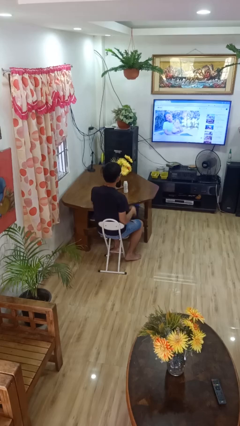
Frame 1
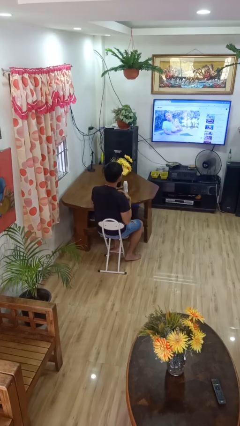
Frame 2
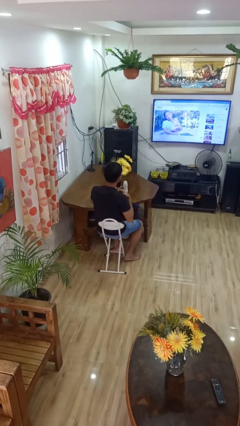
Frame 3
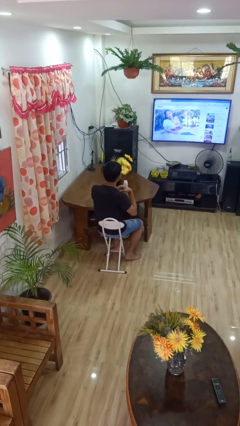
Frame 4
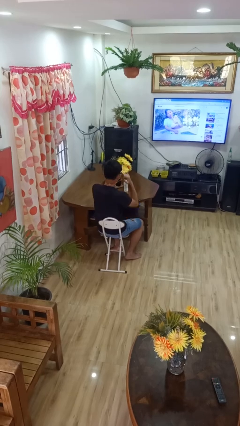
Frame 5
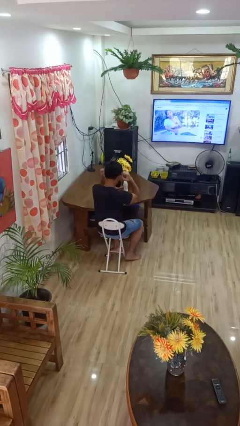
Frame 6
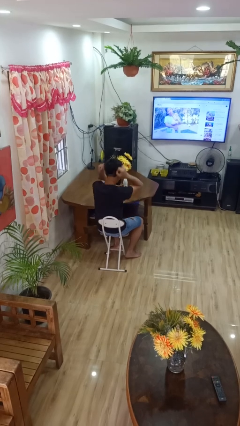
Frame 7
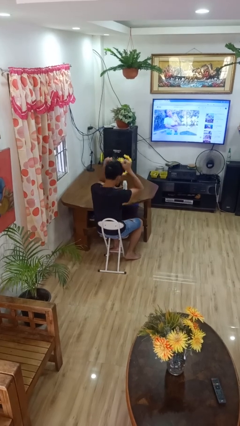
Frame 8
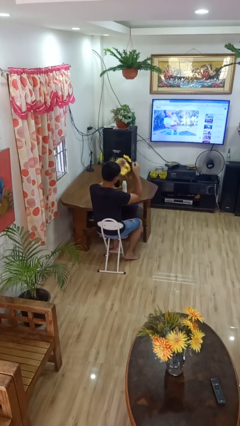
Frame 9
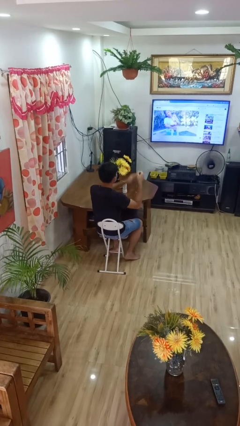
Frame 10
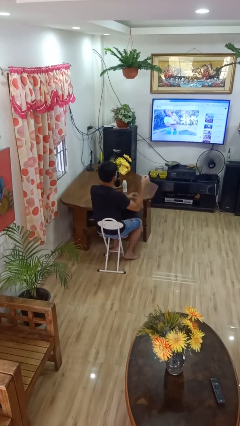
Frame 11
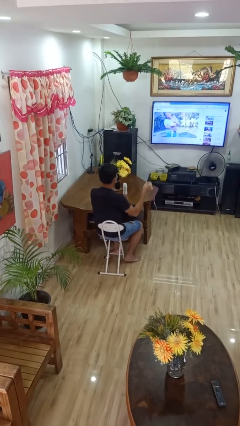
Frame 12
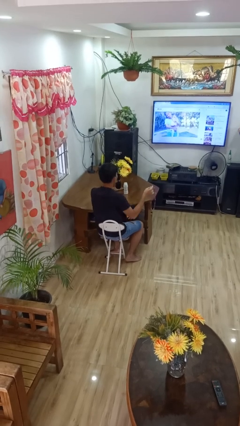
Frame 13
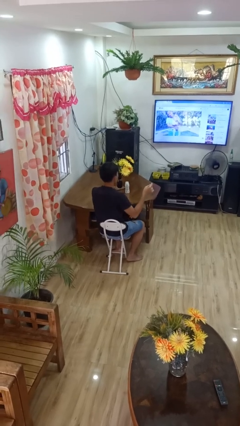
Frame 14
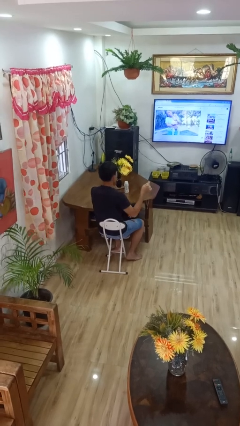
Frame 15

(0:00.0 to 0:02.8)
person takes off necklace

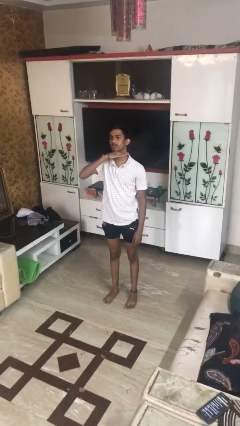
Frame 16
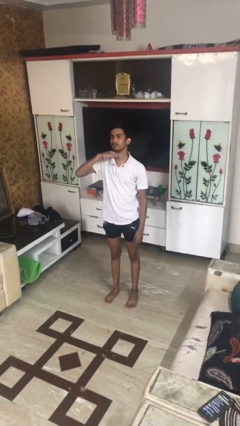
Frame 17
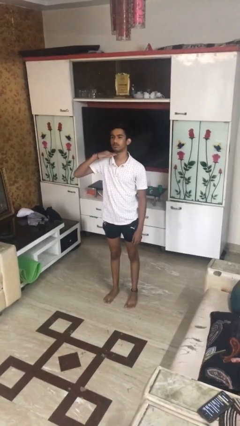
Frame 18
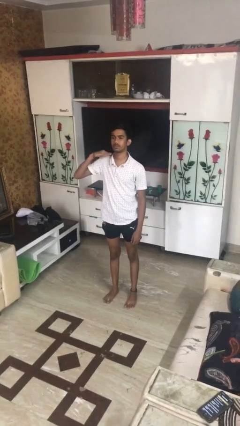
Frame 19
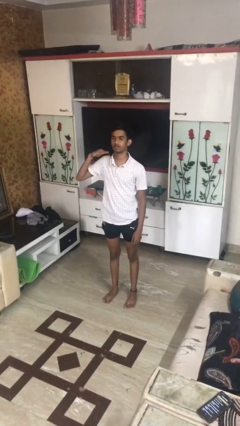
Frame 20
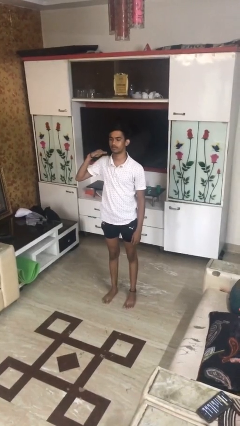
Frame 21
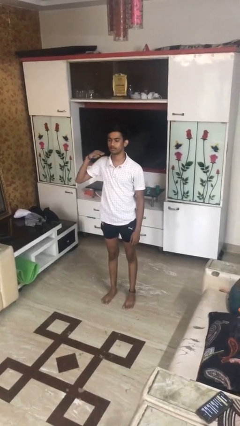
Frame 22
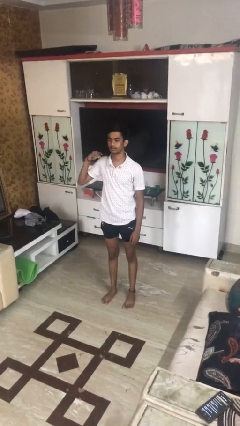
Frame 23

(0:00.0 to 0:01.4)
person gestures cut

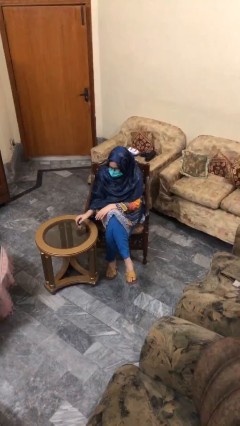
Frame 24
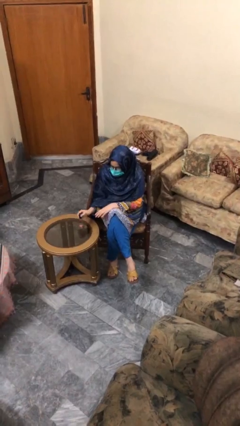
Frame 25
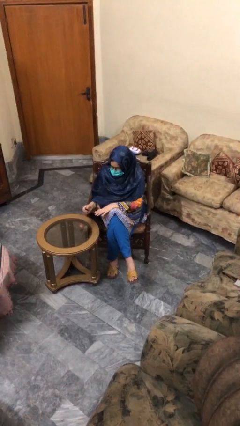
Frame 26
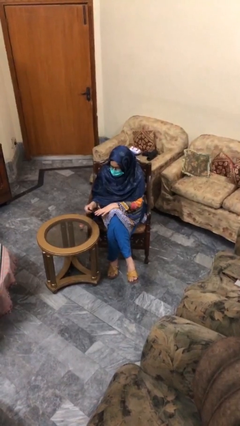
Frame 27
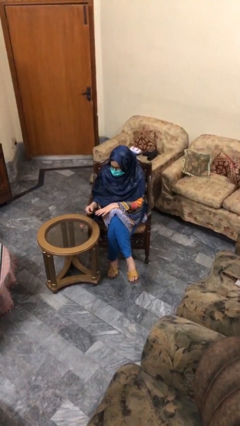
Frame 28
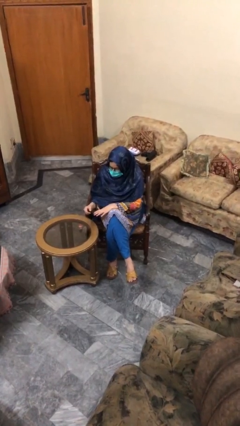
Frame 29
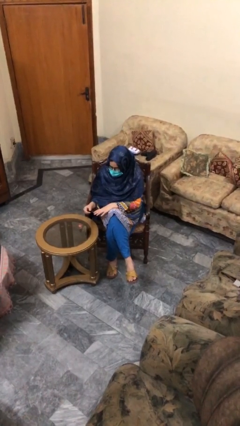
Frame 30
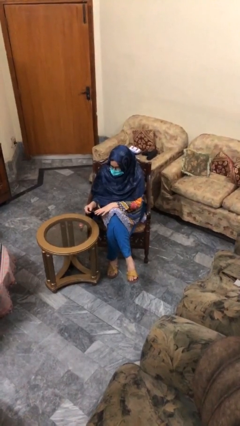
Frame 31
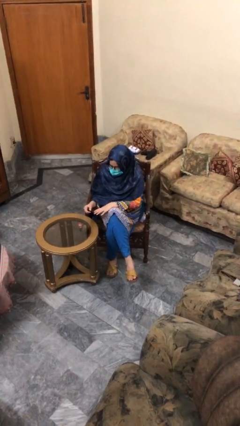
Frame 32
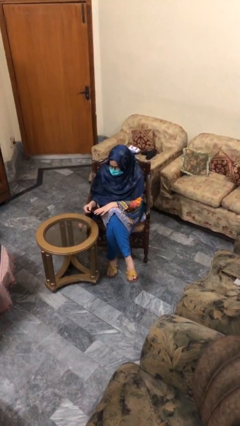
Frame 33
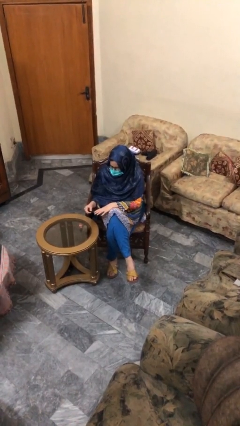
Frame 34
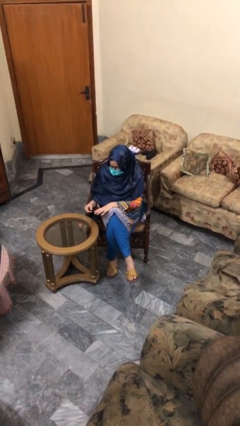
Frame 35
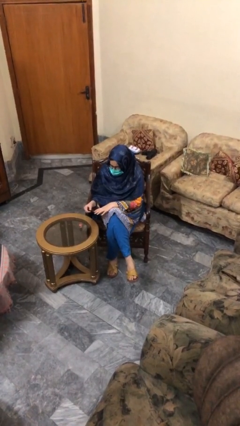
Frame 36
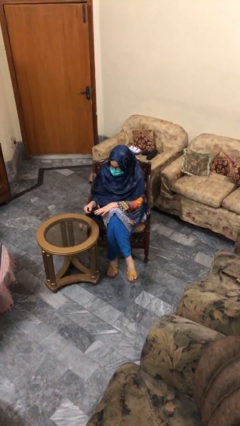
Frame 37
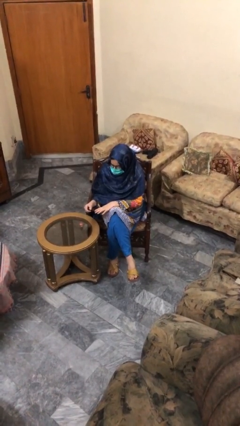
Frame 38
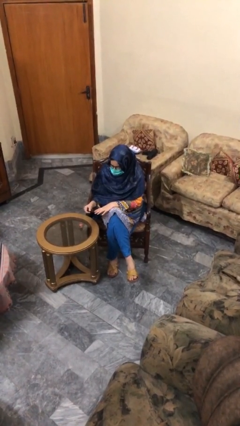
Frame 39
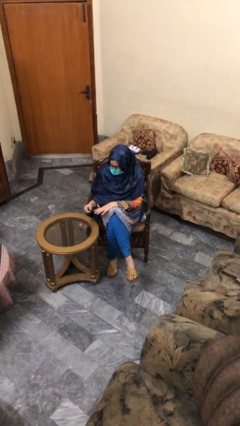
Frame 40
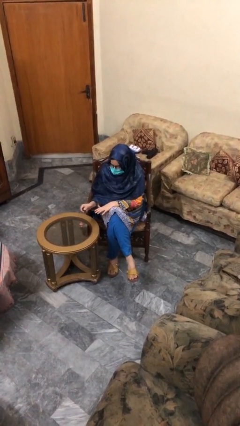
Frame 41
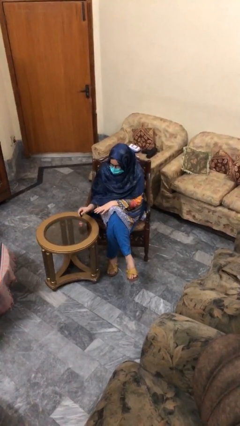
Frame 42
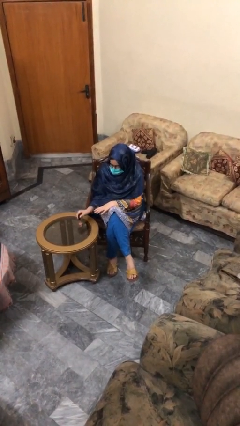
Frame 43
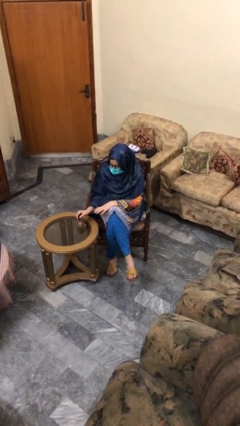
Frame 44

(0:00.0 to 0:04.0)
person paints fingernails

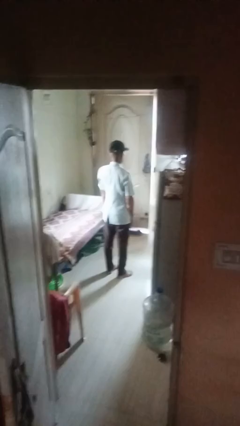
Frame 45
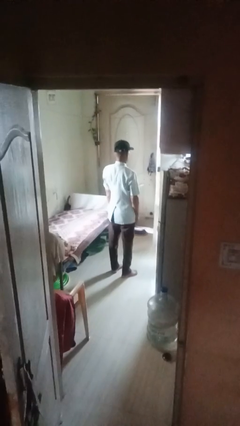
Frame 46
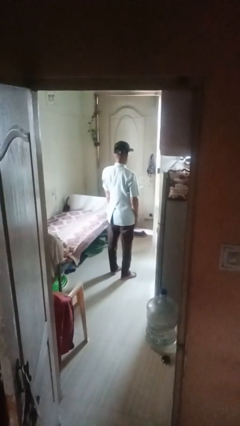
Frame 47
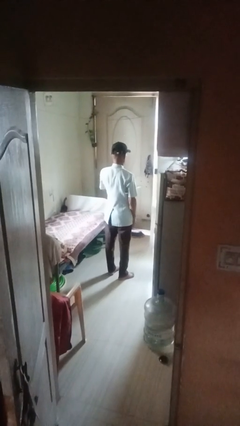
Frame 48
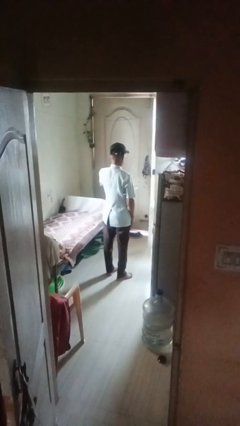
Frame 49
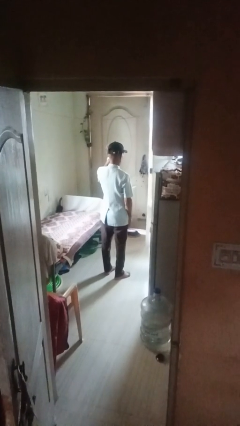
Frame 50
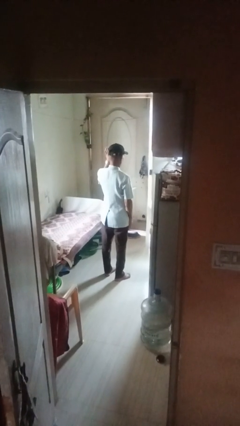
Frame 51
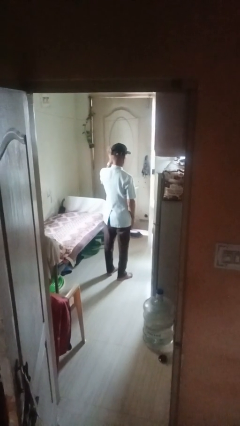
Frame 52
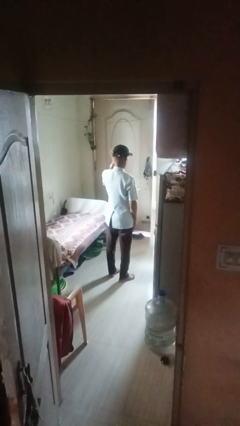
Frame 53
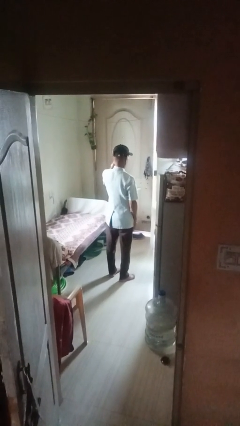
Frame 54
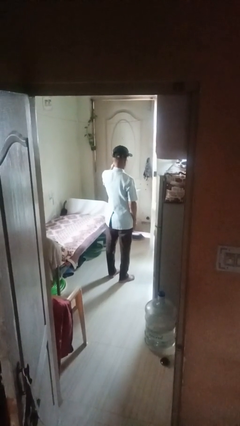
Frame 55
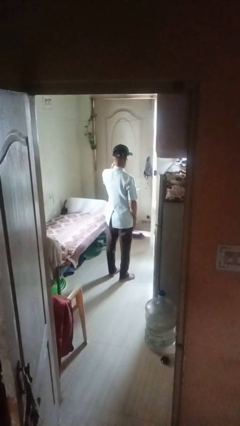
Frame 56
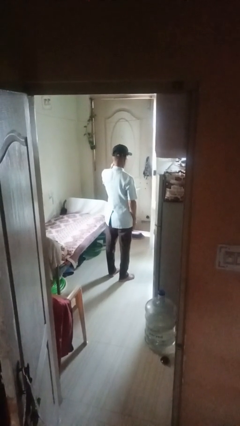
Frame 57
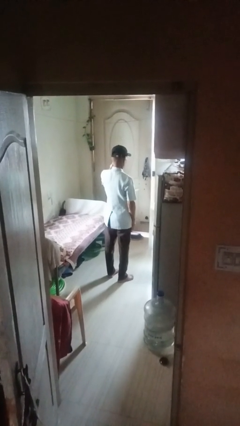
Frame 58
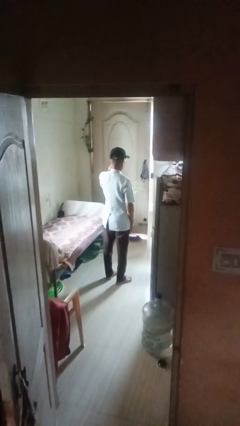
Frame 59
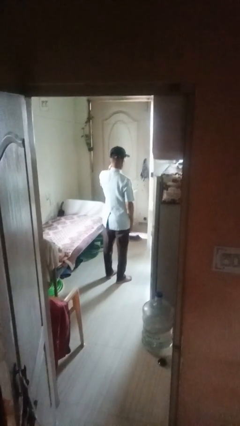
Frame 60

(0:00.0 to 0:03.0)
person gestures stop

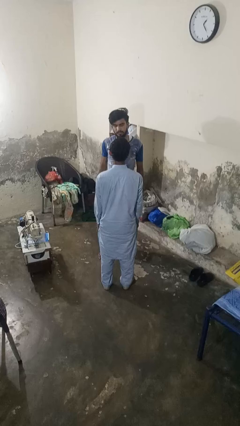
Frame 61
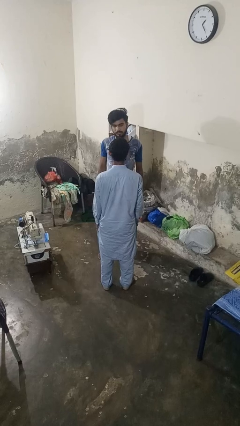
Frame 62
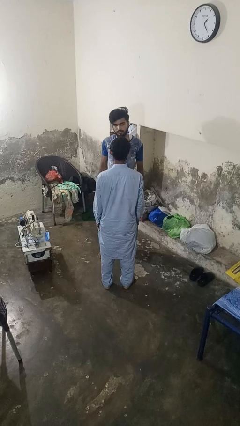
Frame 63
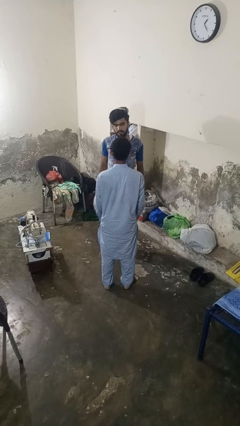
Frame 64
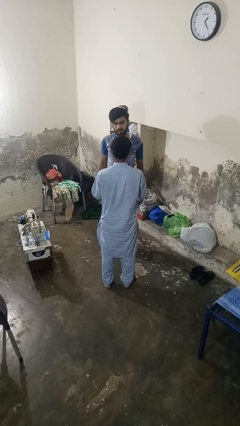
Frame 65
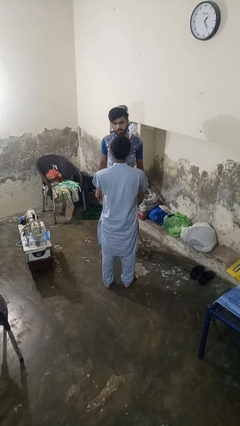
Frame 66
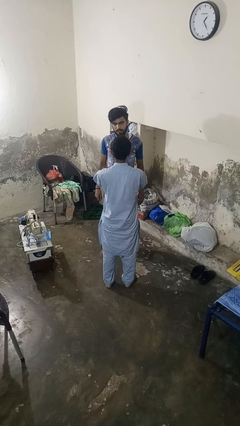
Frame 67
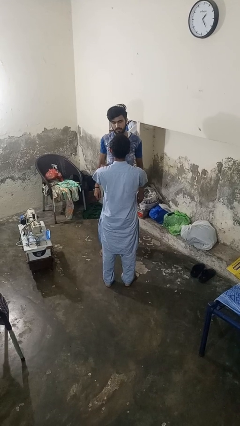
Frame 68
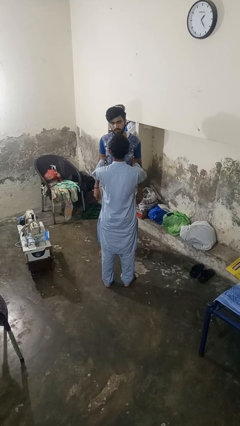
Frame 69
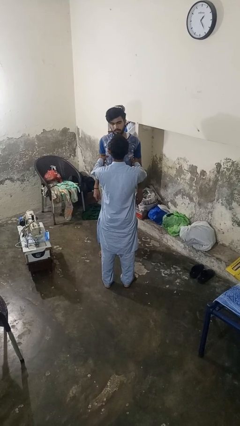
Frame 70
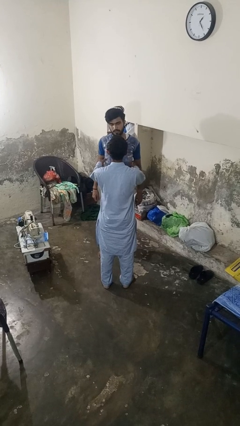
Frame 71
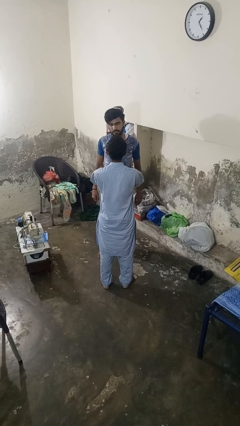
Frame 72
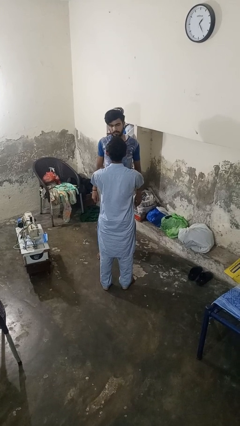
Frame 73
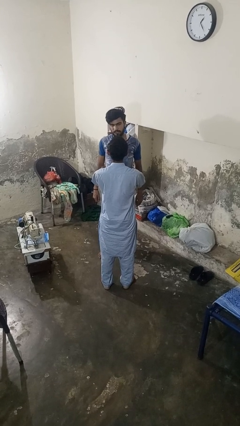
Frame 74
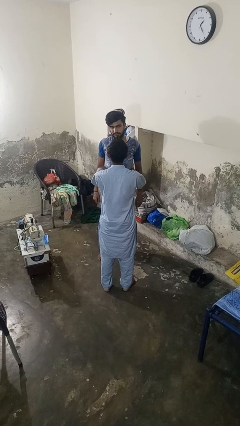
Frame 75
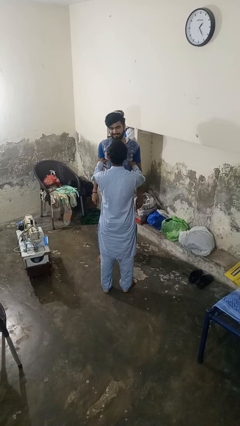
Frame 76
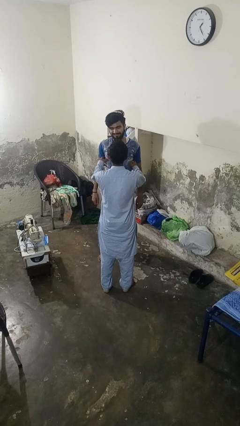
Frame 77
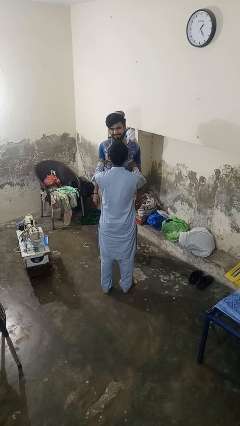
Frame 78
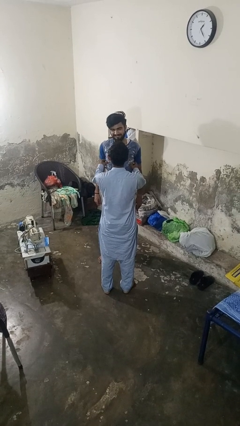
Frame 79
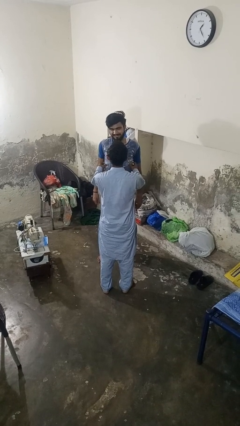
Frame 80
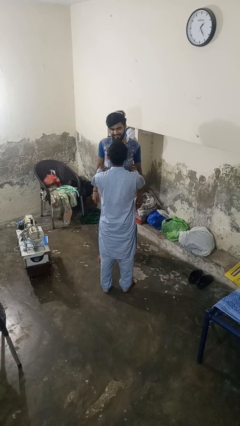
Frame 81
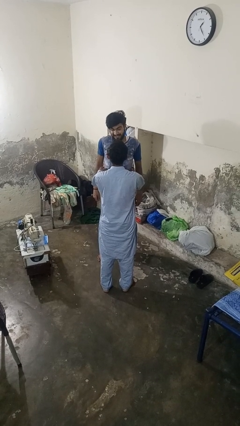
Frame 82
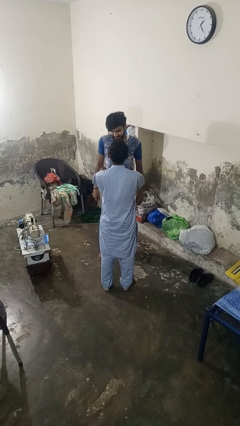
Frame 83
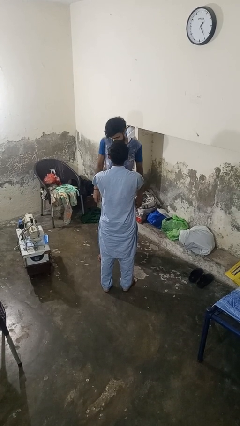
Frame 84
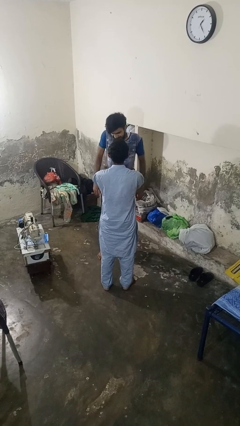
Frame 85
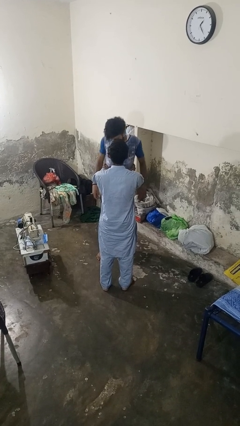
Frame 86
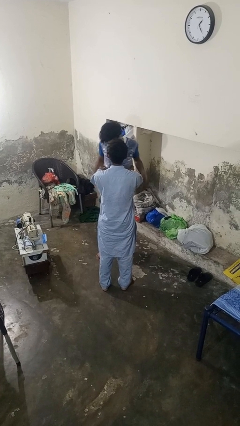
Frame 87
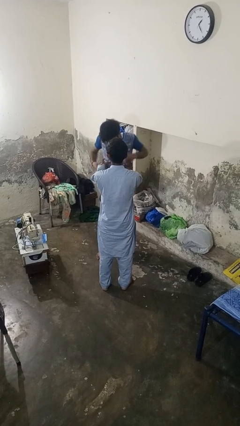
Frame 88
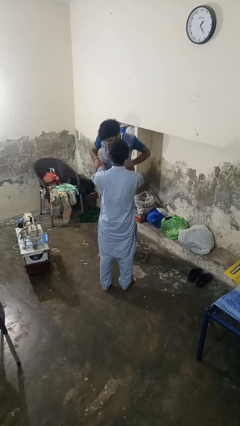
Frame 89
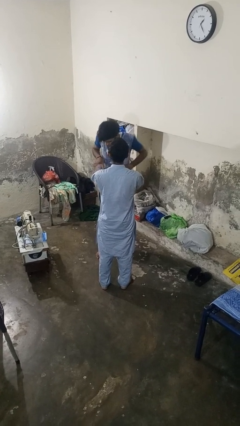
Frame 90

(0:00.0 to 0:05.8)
person tickles person

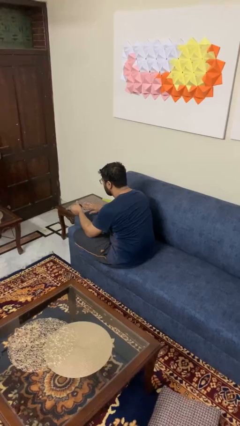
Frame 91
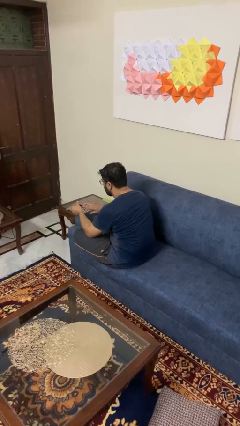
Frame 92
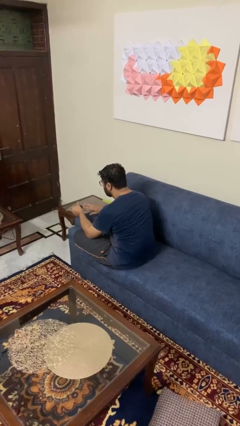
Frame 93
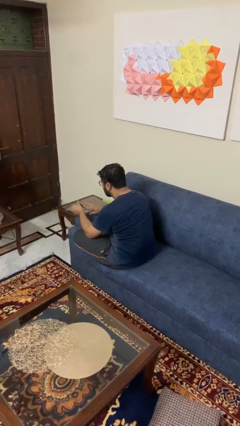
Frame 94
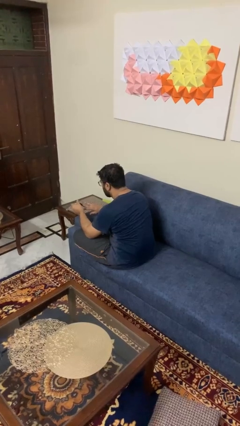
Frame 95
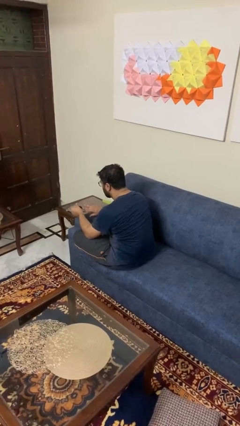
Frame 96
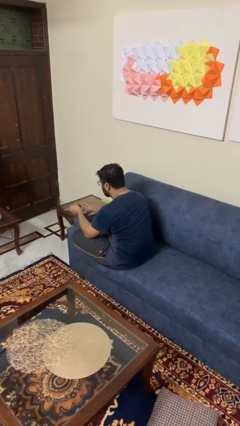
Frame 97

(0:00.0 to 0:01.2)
person clips fingernails
